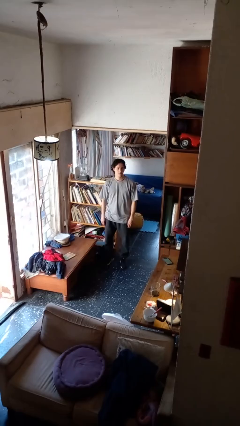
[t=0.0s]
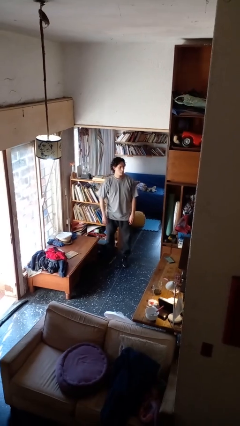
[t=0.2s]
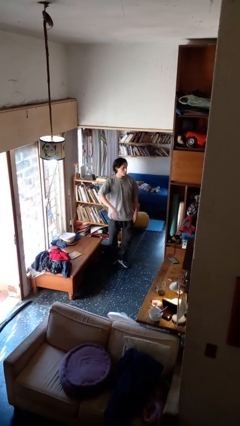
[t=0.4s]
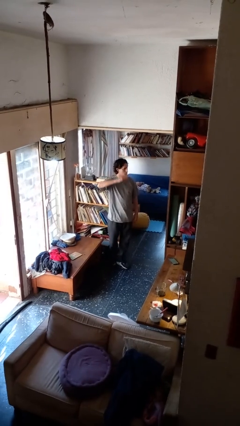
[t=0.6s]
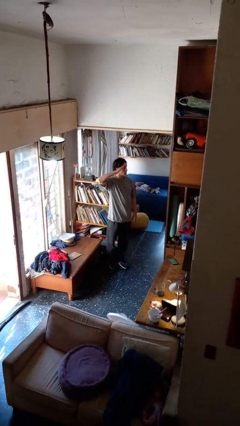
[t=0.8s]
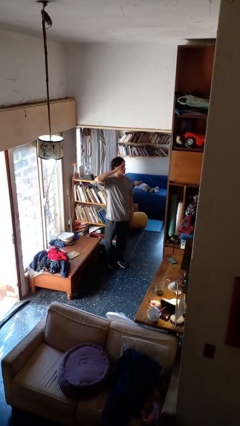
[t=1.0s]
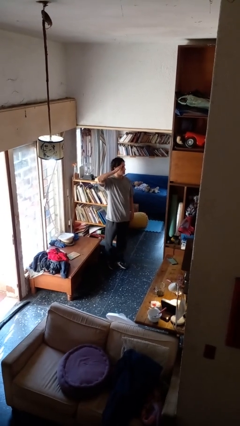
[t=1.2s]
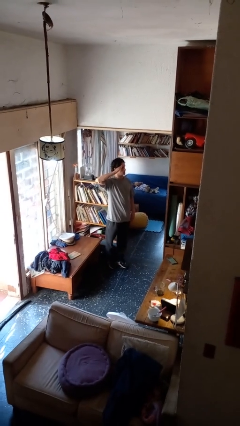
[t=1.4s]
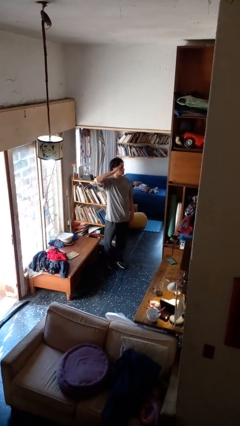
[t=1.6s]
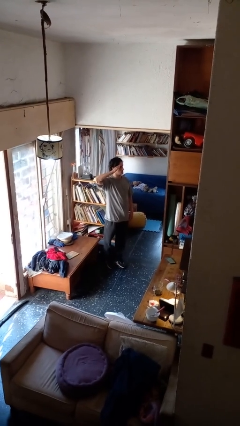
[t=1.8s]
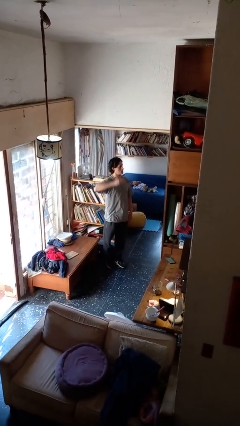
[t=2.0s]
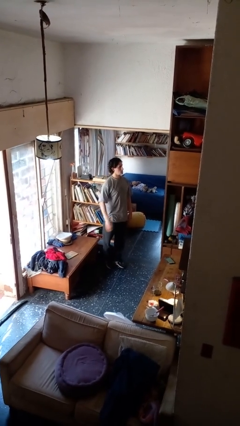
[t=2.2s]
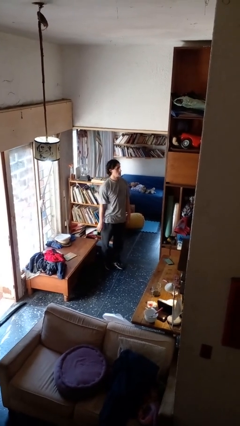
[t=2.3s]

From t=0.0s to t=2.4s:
person salutes

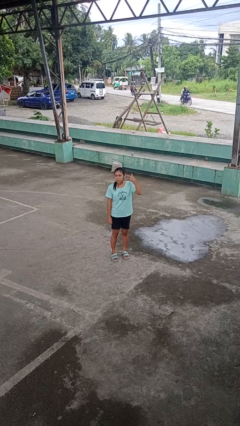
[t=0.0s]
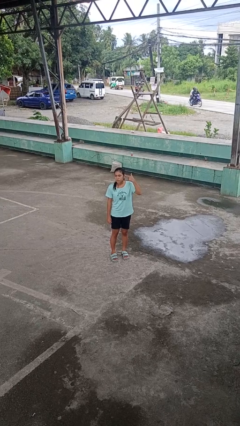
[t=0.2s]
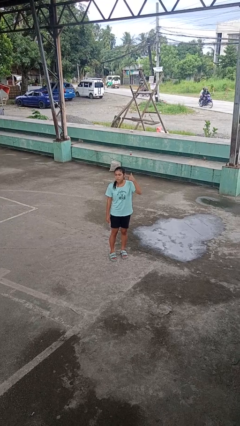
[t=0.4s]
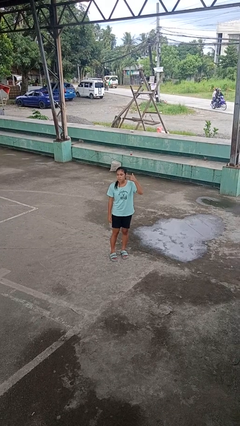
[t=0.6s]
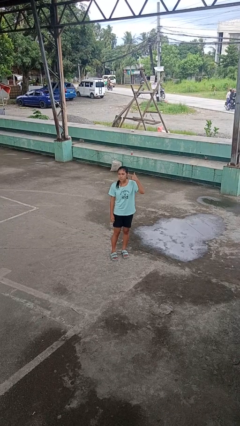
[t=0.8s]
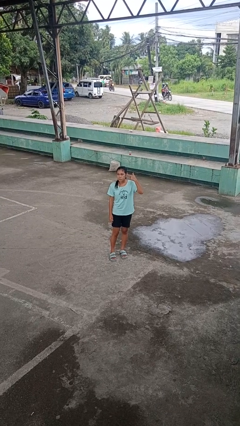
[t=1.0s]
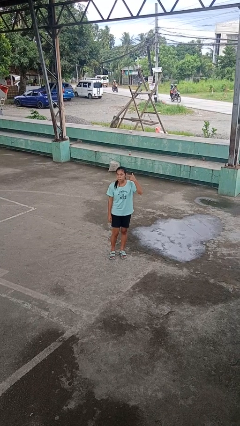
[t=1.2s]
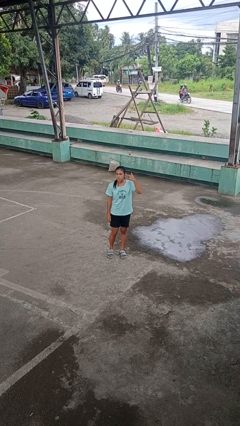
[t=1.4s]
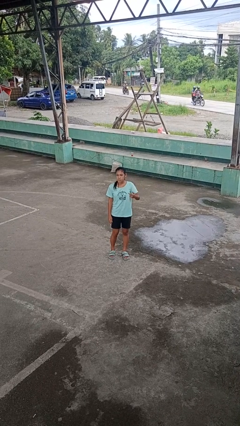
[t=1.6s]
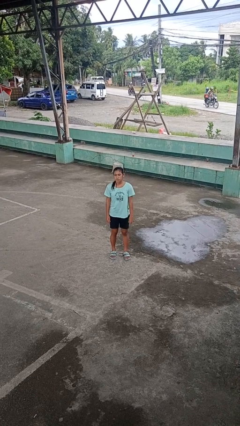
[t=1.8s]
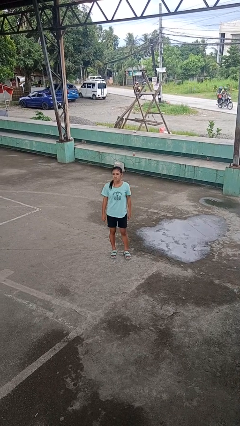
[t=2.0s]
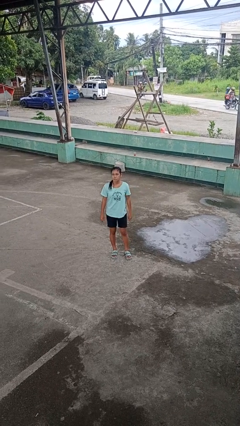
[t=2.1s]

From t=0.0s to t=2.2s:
person gestures listen closely

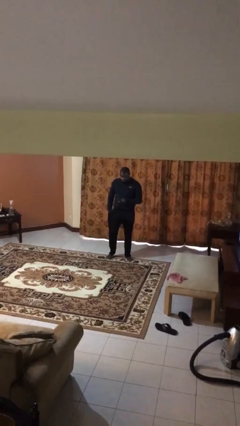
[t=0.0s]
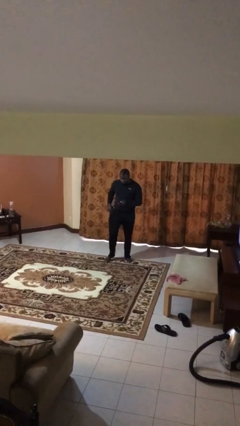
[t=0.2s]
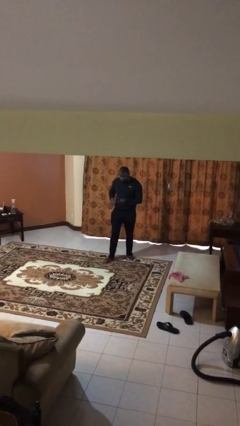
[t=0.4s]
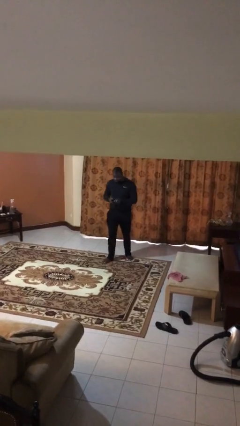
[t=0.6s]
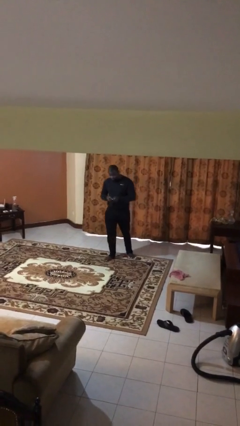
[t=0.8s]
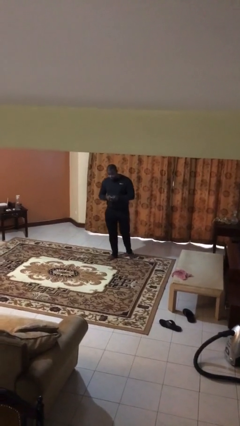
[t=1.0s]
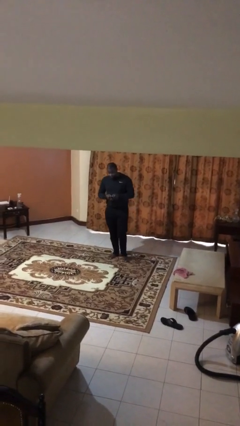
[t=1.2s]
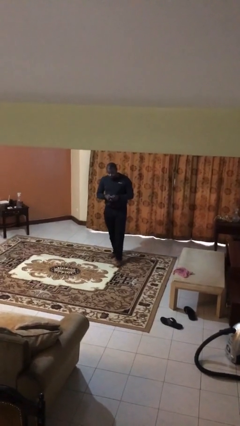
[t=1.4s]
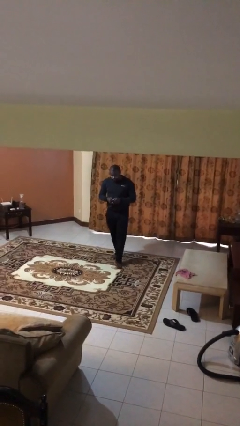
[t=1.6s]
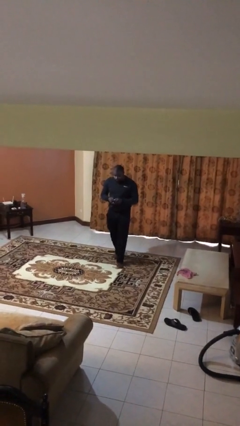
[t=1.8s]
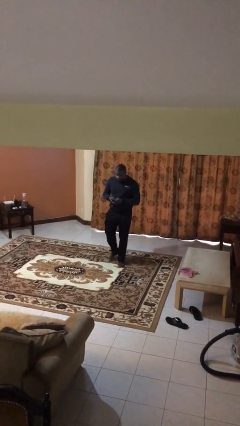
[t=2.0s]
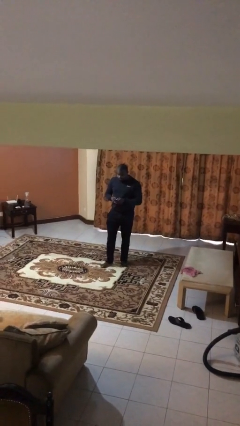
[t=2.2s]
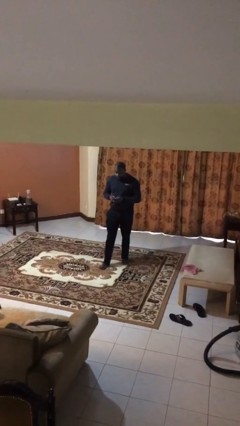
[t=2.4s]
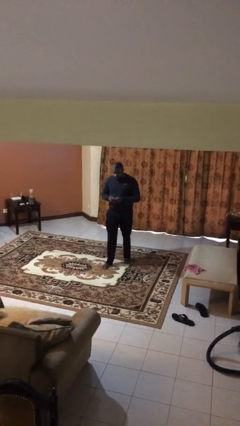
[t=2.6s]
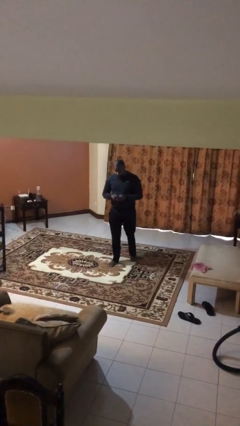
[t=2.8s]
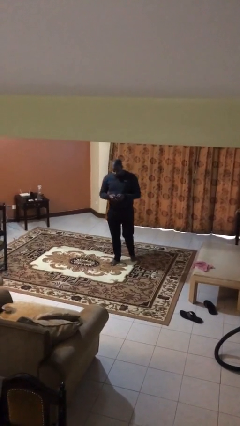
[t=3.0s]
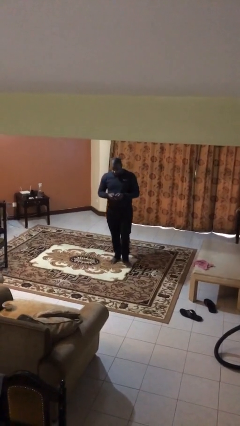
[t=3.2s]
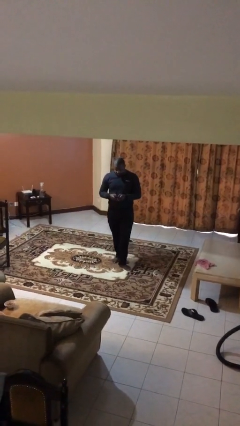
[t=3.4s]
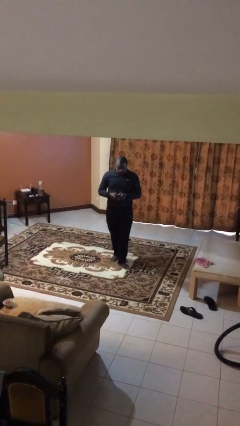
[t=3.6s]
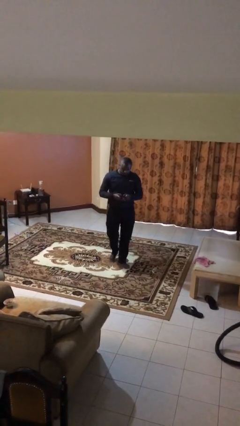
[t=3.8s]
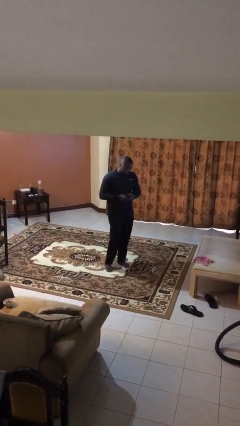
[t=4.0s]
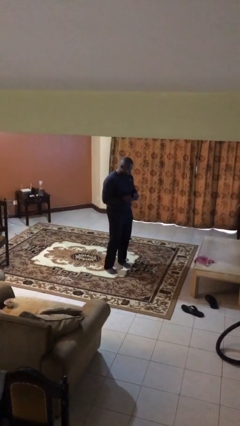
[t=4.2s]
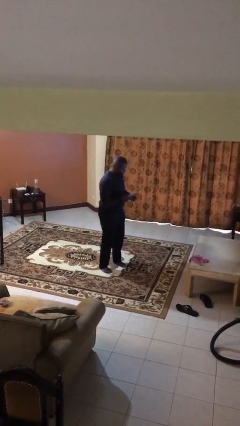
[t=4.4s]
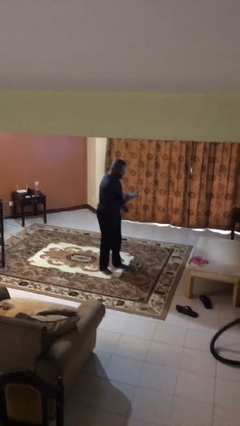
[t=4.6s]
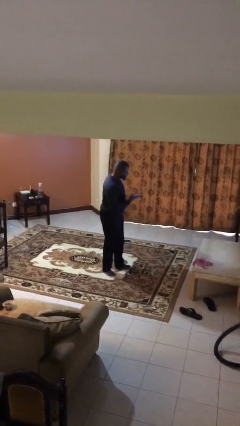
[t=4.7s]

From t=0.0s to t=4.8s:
person texts on phone

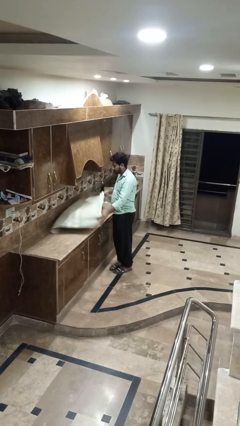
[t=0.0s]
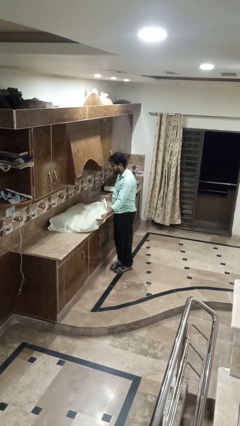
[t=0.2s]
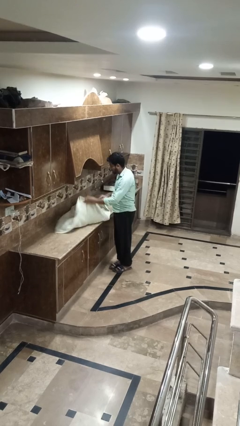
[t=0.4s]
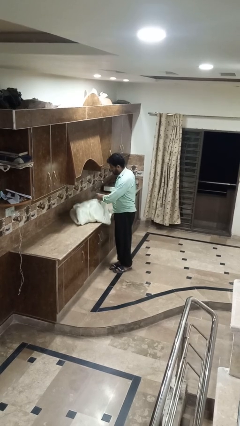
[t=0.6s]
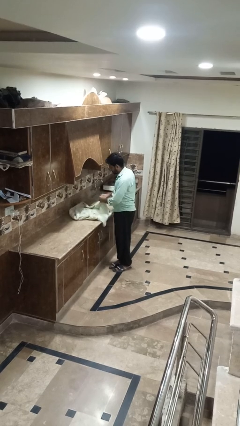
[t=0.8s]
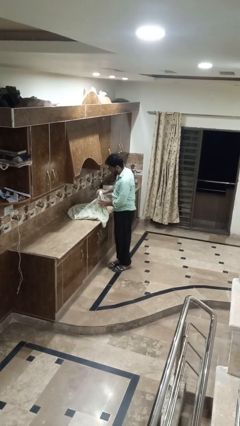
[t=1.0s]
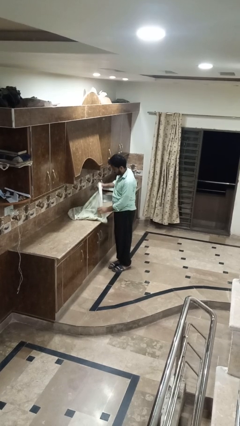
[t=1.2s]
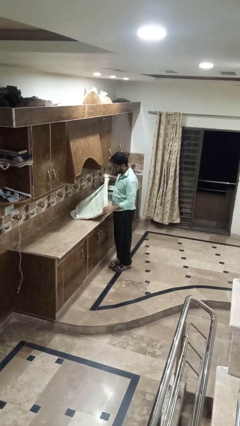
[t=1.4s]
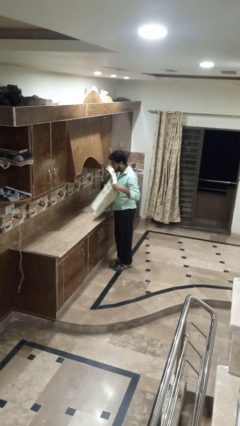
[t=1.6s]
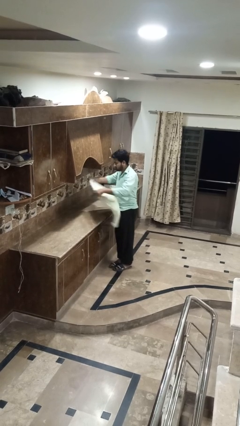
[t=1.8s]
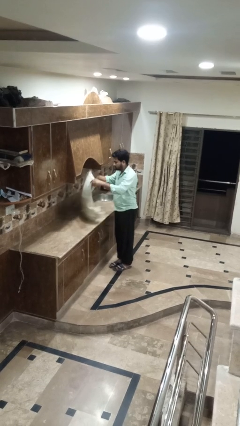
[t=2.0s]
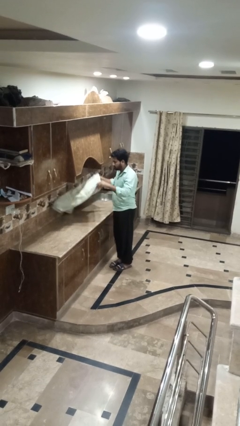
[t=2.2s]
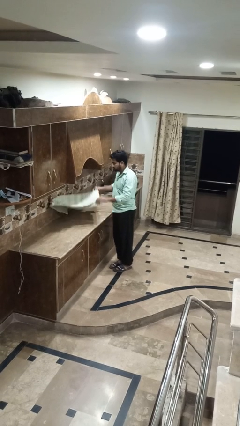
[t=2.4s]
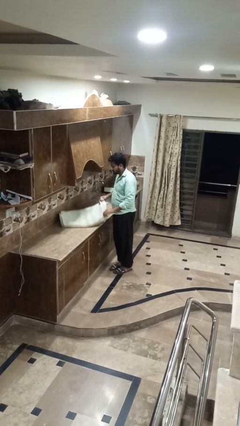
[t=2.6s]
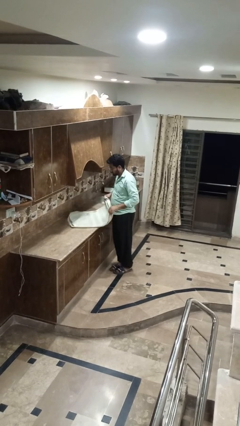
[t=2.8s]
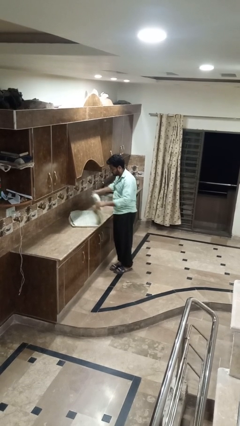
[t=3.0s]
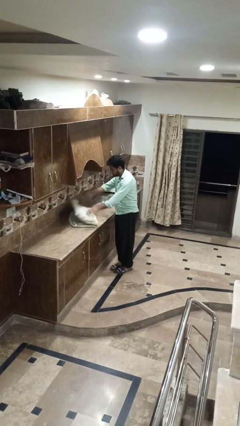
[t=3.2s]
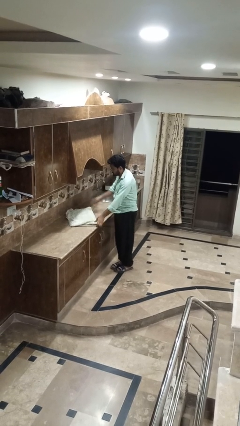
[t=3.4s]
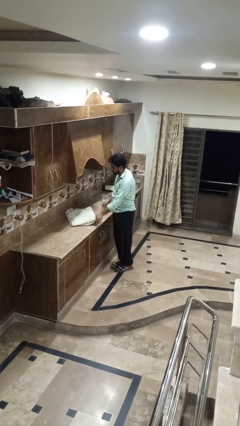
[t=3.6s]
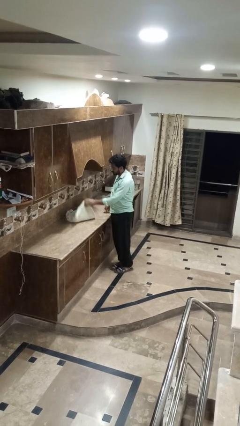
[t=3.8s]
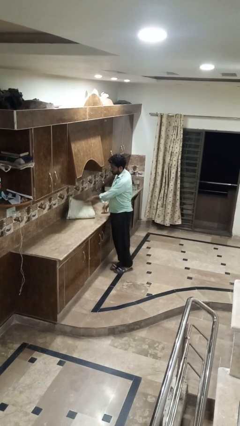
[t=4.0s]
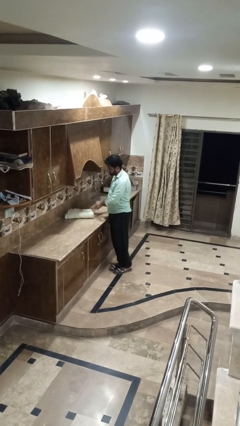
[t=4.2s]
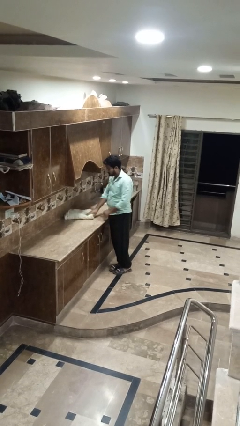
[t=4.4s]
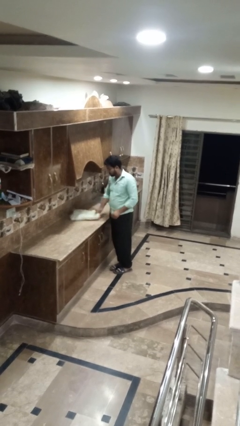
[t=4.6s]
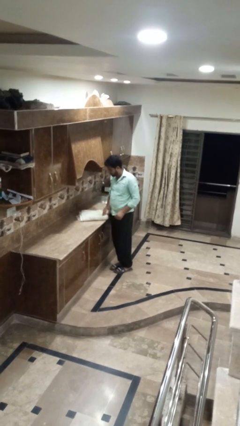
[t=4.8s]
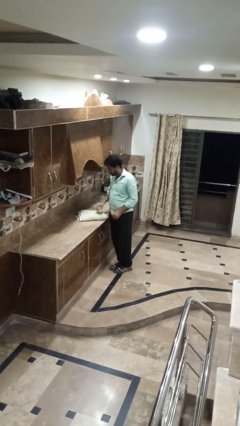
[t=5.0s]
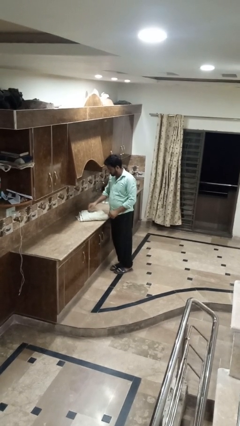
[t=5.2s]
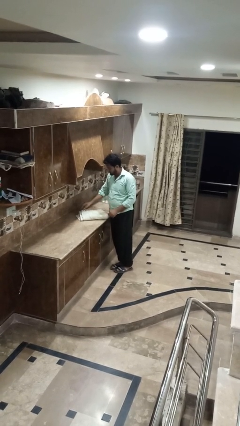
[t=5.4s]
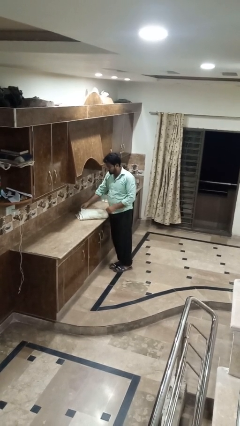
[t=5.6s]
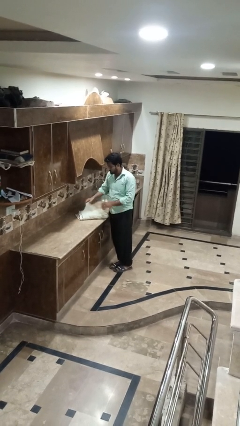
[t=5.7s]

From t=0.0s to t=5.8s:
person folds towel

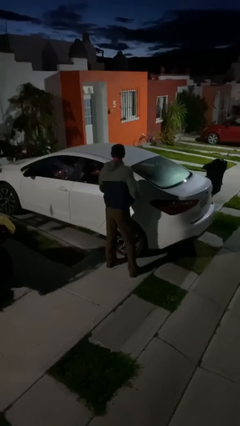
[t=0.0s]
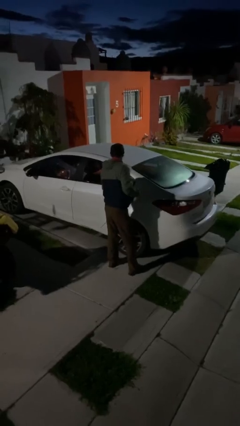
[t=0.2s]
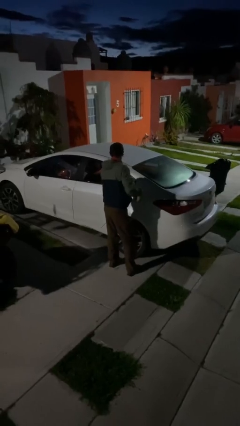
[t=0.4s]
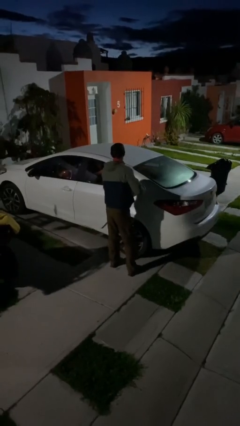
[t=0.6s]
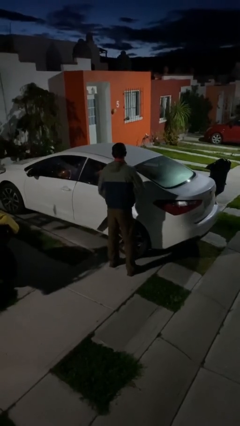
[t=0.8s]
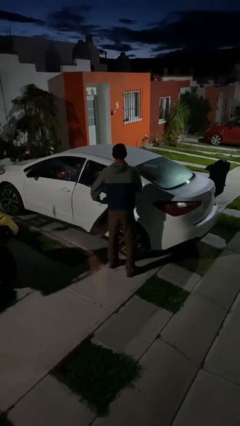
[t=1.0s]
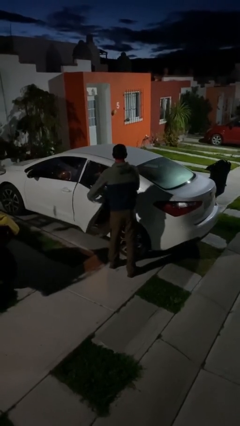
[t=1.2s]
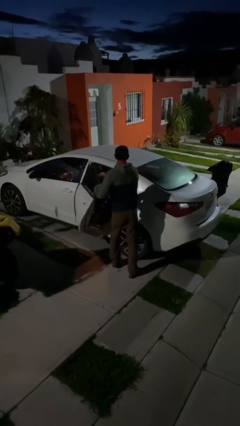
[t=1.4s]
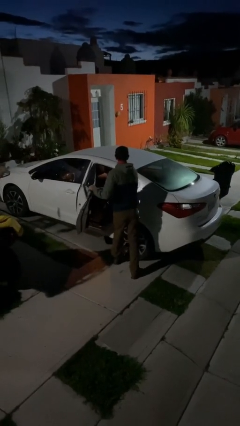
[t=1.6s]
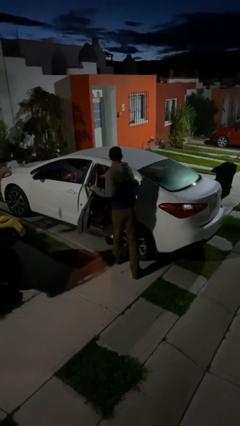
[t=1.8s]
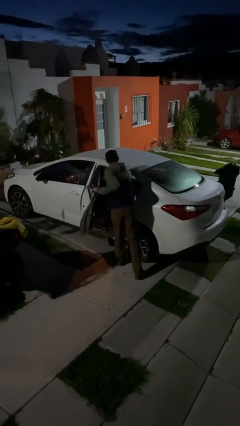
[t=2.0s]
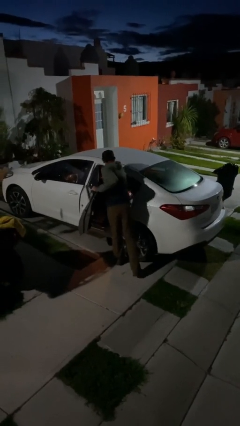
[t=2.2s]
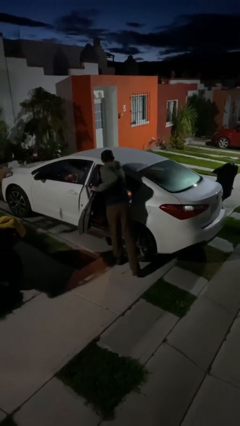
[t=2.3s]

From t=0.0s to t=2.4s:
person opens car door
